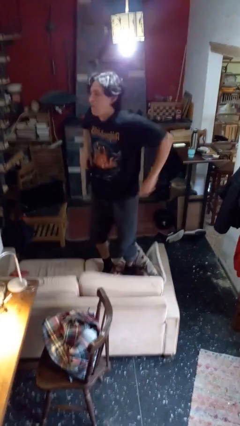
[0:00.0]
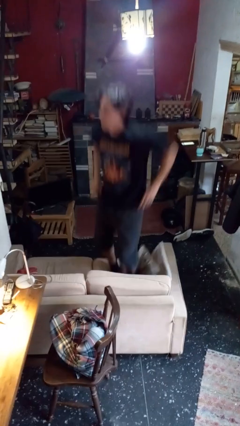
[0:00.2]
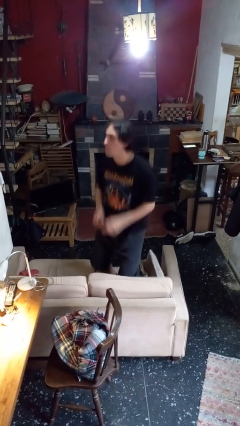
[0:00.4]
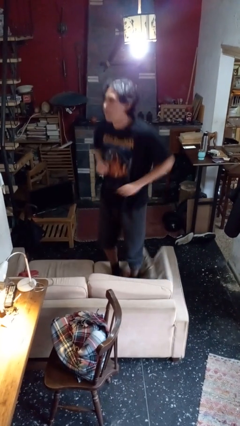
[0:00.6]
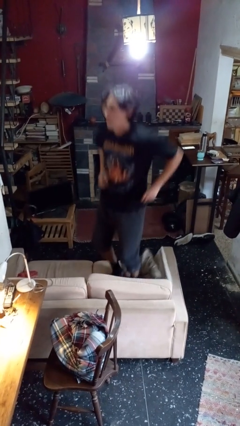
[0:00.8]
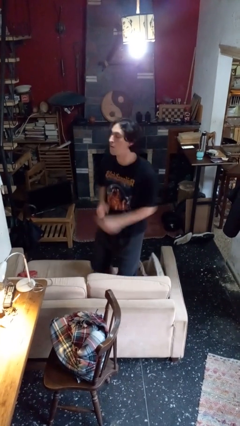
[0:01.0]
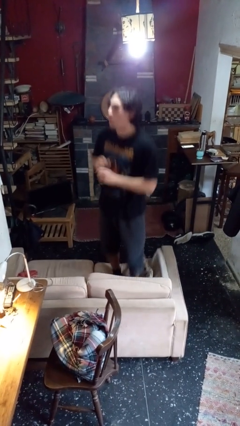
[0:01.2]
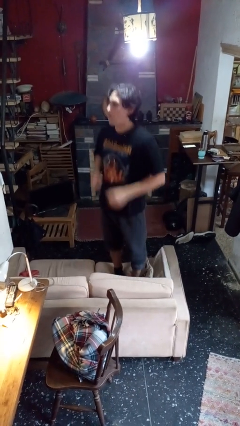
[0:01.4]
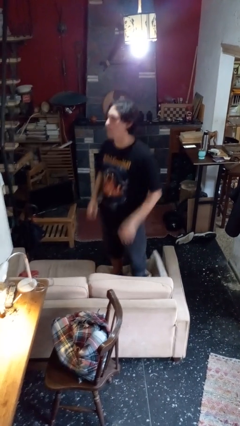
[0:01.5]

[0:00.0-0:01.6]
person jumps on couch

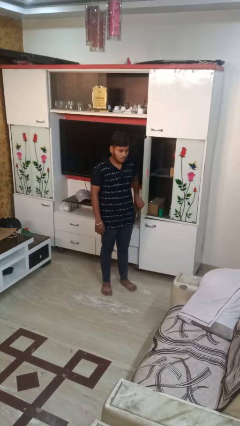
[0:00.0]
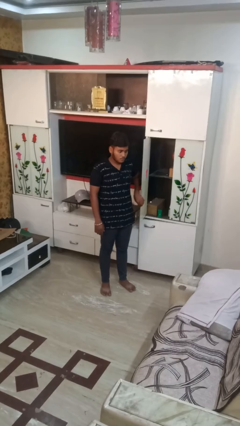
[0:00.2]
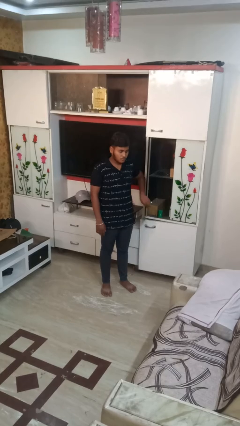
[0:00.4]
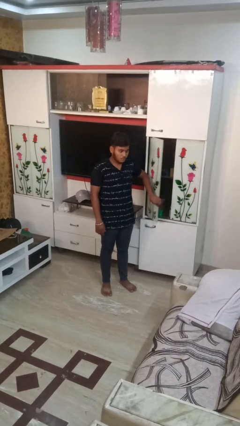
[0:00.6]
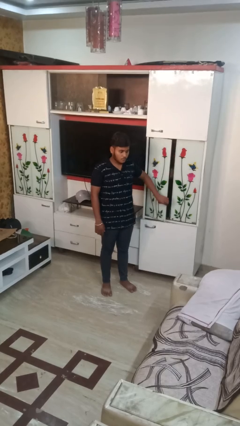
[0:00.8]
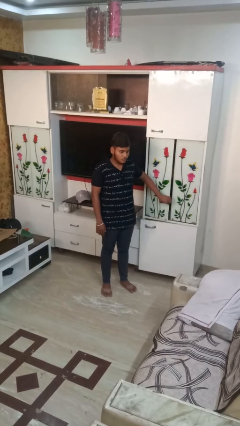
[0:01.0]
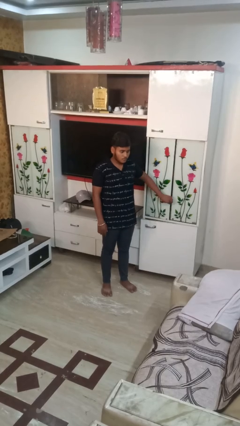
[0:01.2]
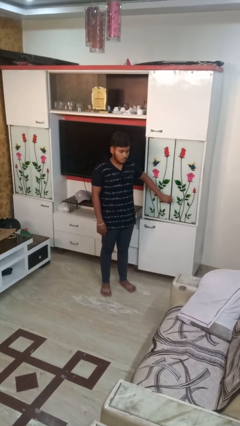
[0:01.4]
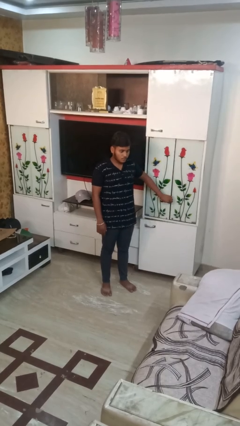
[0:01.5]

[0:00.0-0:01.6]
person closes closet door

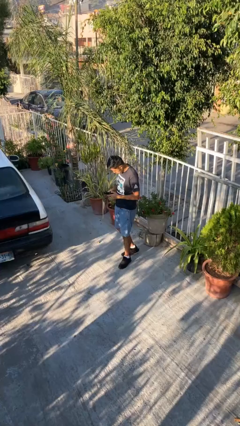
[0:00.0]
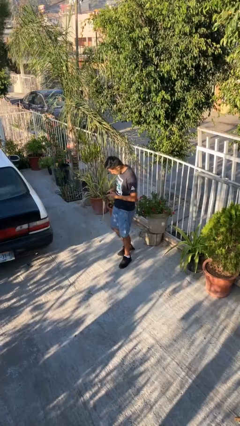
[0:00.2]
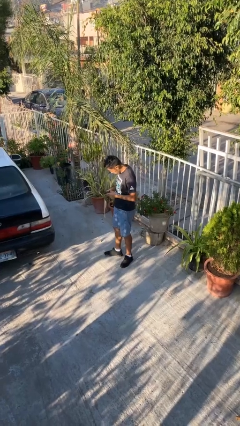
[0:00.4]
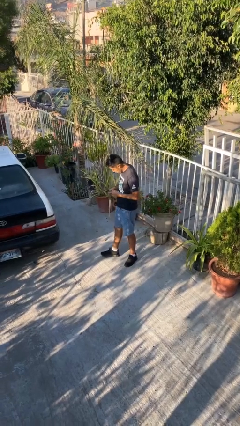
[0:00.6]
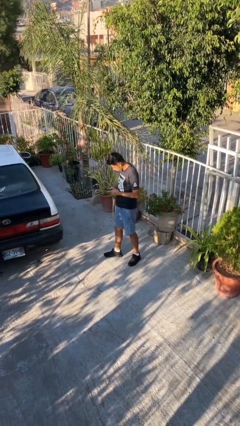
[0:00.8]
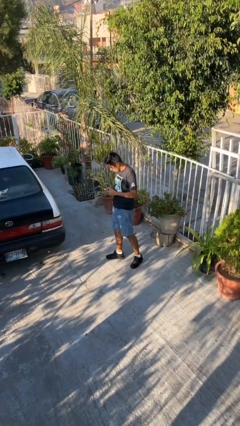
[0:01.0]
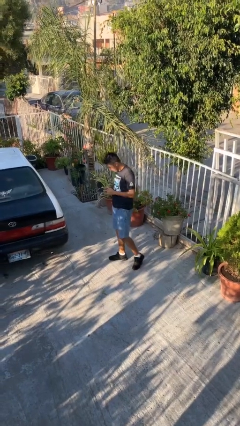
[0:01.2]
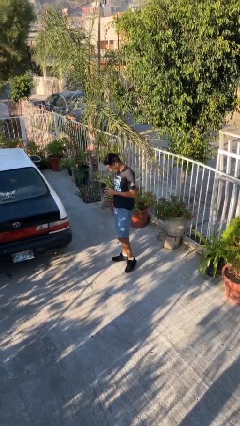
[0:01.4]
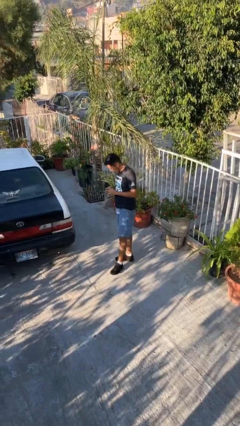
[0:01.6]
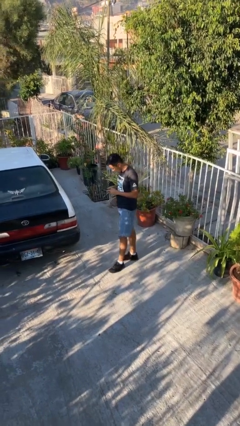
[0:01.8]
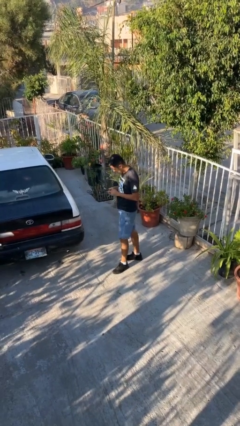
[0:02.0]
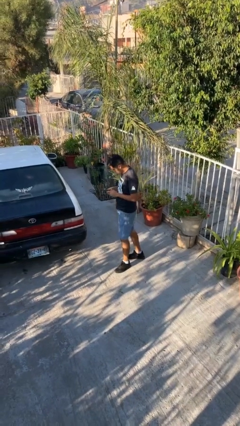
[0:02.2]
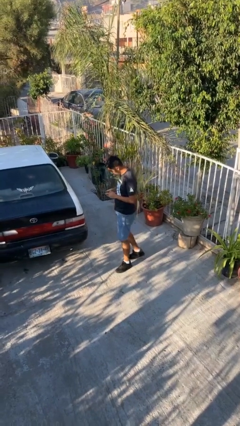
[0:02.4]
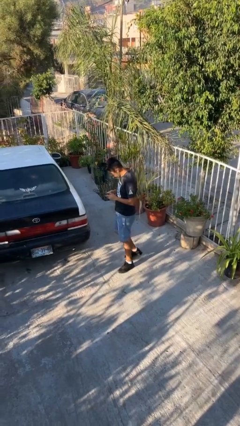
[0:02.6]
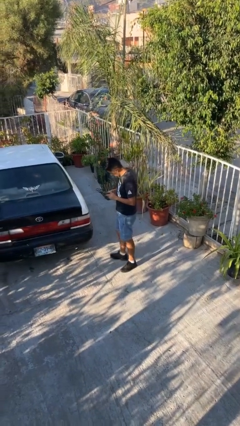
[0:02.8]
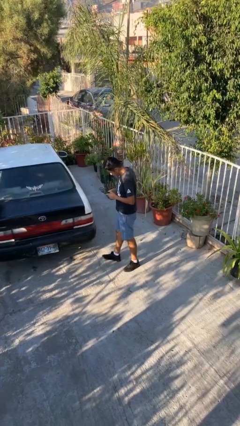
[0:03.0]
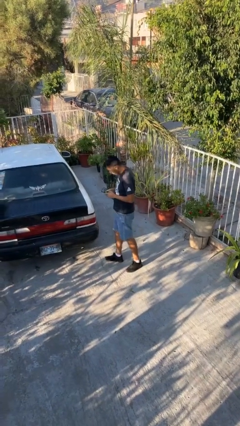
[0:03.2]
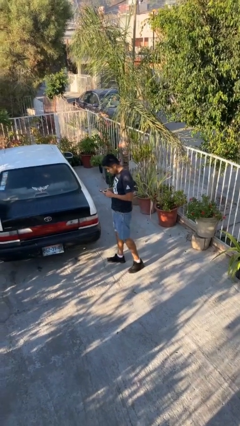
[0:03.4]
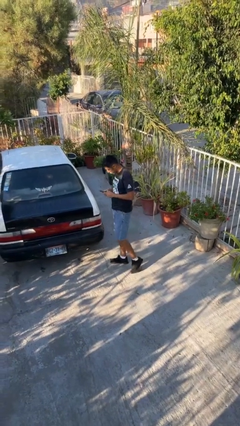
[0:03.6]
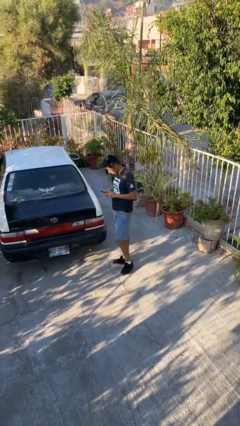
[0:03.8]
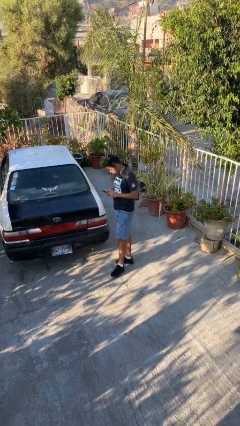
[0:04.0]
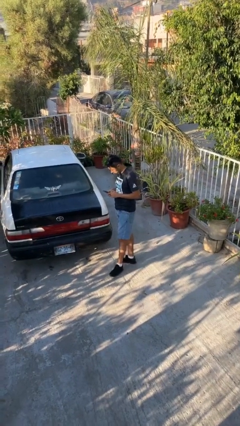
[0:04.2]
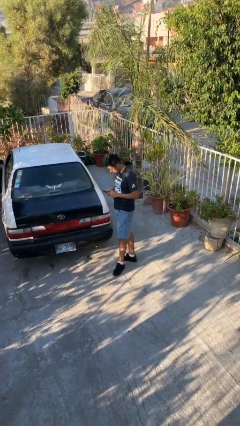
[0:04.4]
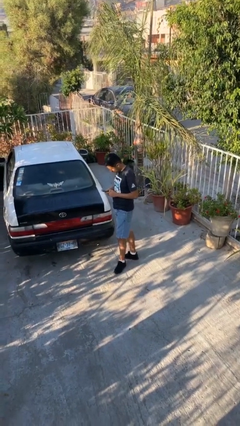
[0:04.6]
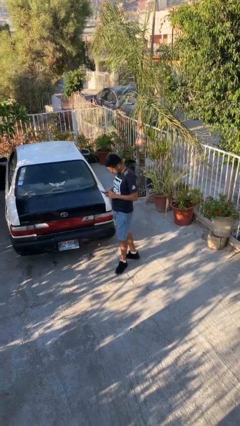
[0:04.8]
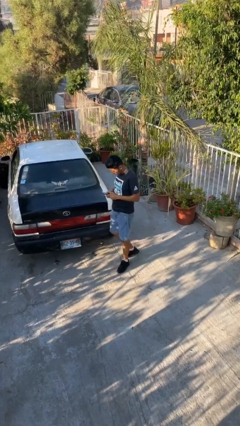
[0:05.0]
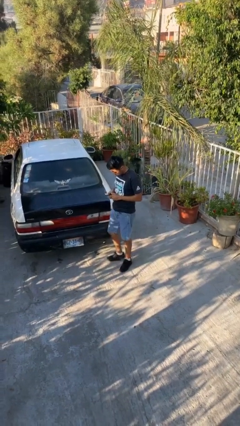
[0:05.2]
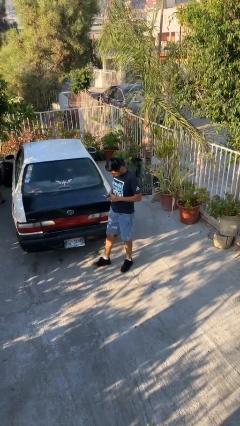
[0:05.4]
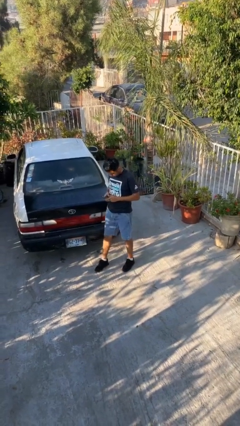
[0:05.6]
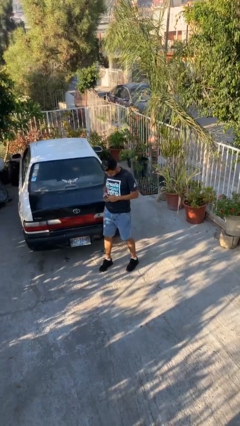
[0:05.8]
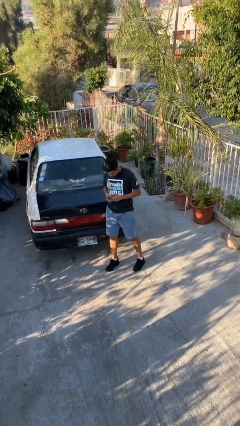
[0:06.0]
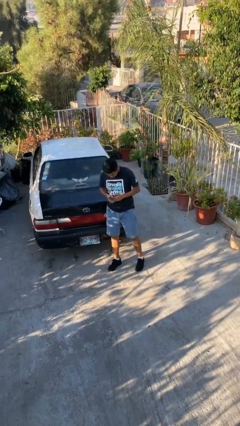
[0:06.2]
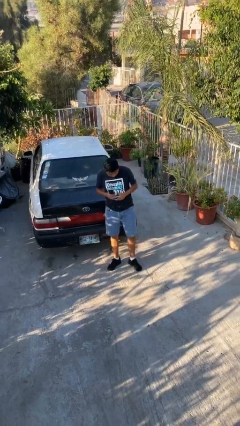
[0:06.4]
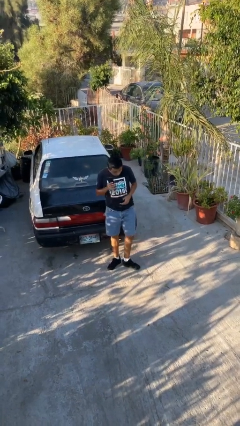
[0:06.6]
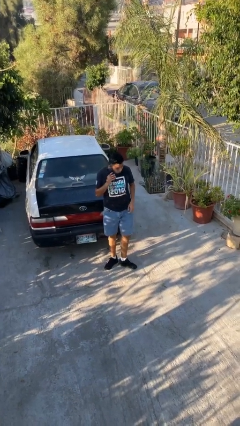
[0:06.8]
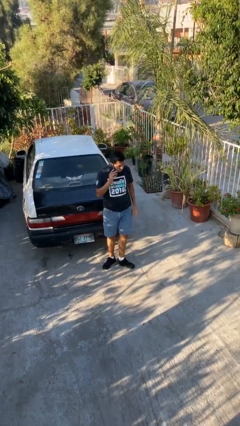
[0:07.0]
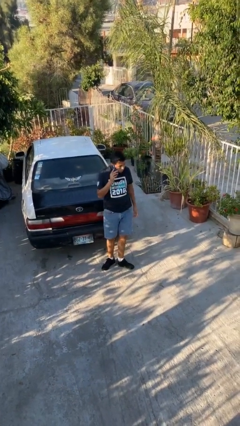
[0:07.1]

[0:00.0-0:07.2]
person texts on phone

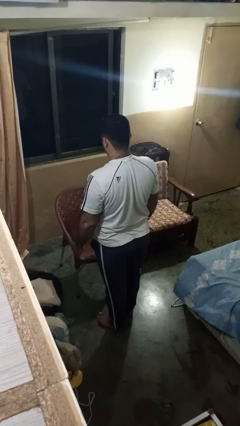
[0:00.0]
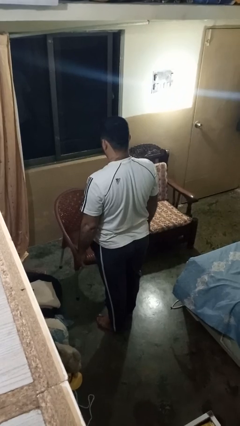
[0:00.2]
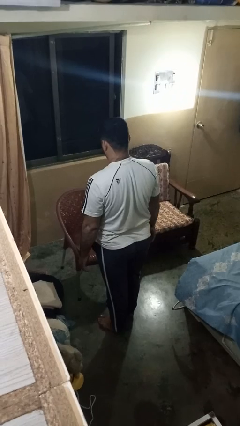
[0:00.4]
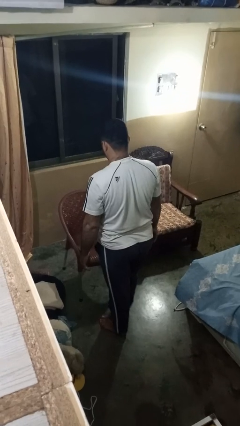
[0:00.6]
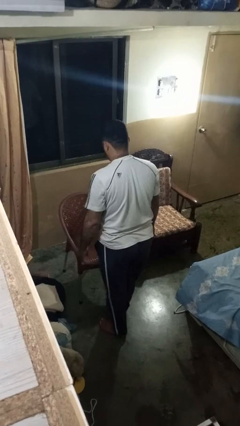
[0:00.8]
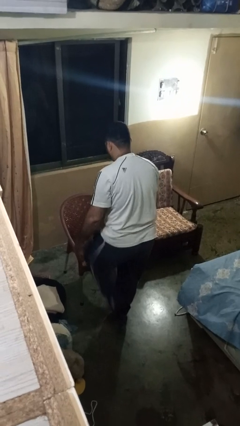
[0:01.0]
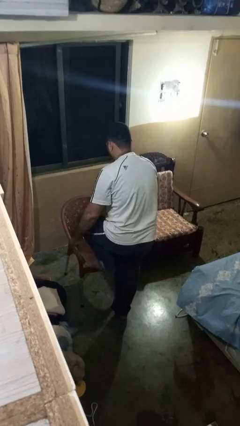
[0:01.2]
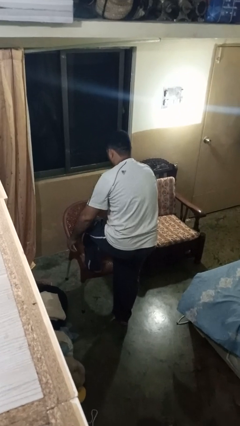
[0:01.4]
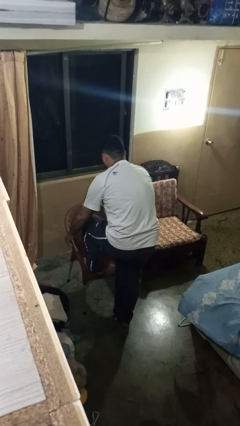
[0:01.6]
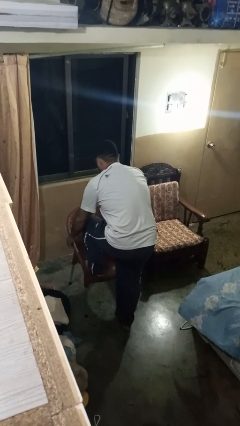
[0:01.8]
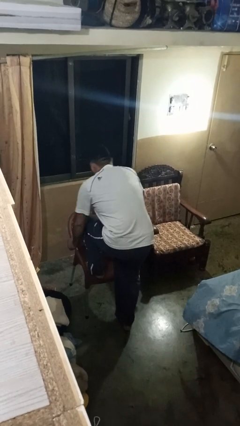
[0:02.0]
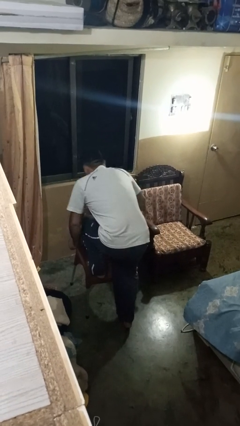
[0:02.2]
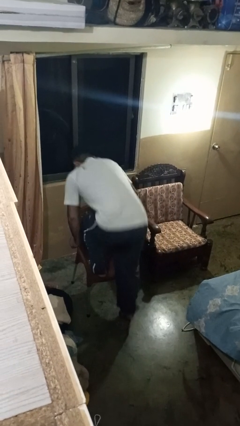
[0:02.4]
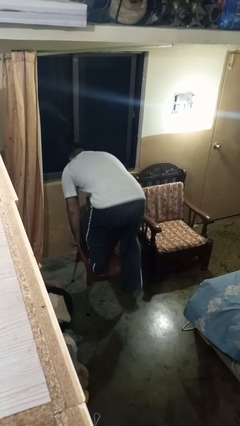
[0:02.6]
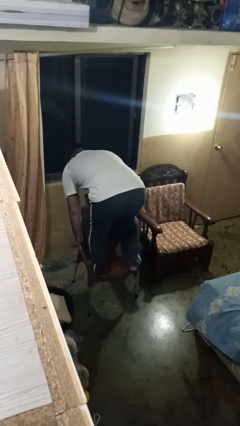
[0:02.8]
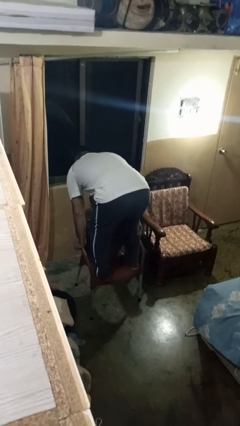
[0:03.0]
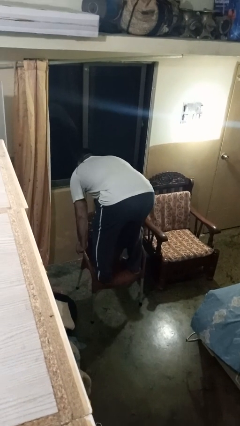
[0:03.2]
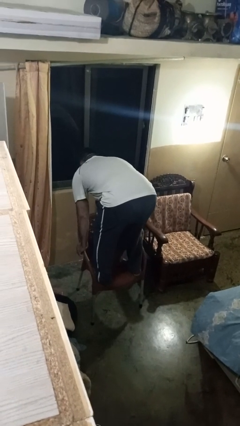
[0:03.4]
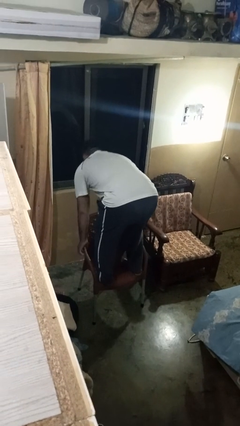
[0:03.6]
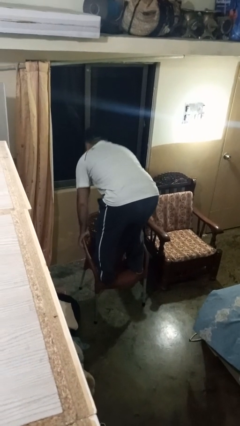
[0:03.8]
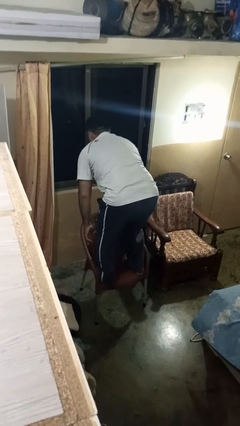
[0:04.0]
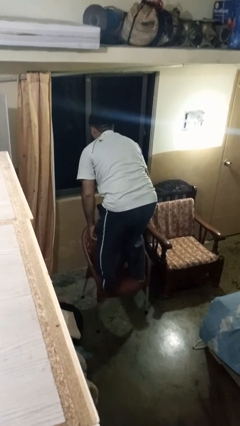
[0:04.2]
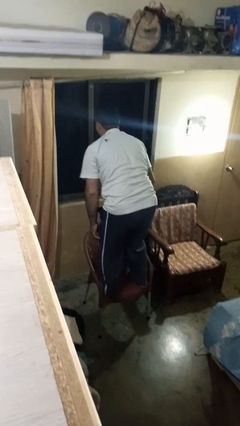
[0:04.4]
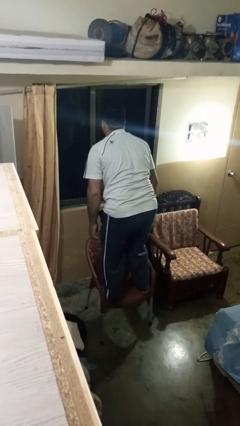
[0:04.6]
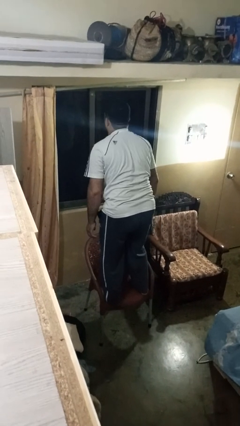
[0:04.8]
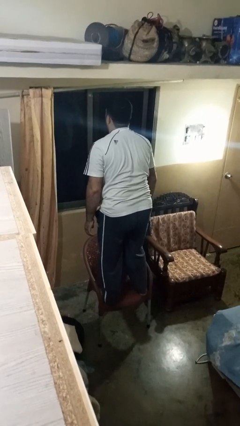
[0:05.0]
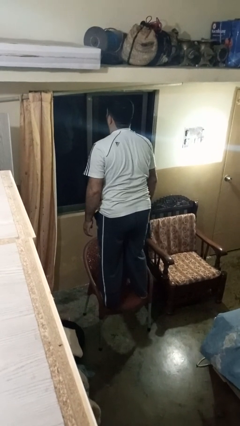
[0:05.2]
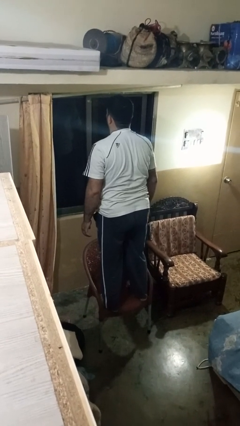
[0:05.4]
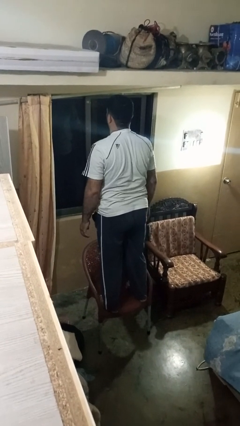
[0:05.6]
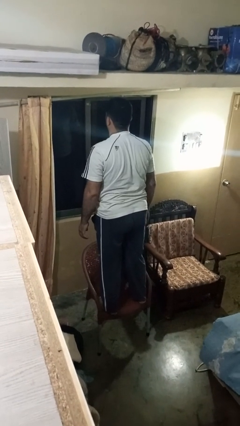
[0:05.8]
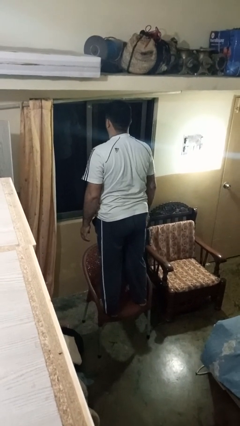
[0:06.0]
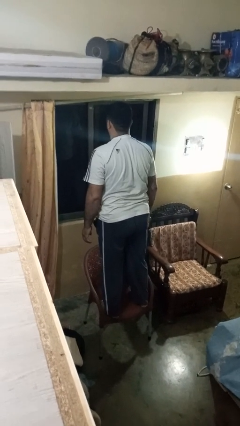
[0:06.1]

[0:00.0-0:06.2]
person climbs on chair

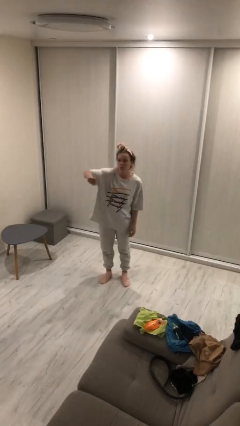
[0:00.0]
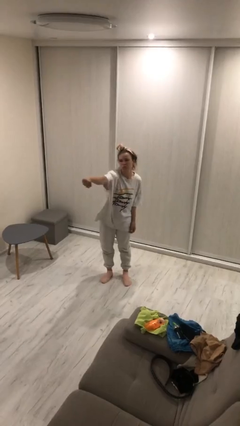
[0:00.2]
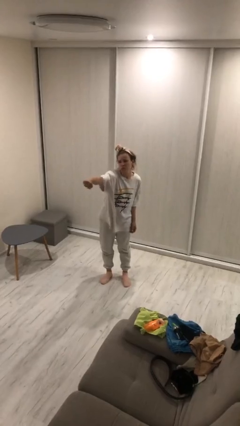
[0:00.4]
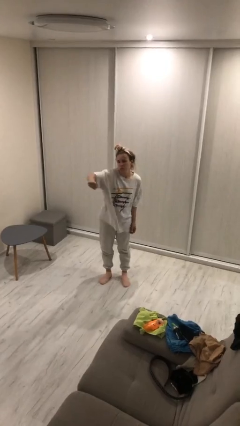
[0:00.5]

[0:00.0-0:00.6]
person karate chop

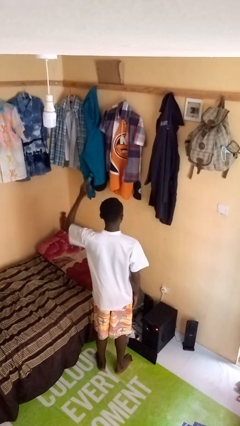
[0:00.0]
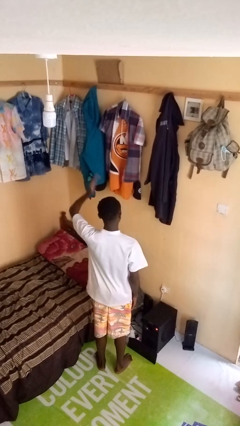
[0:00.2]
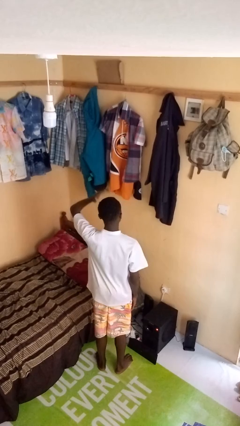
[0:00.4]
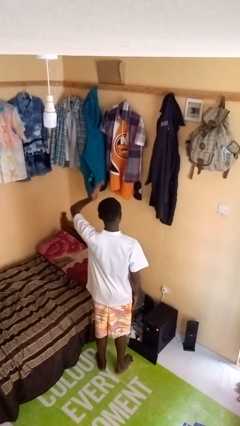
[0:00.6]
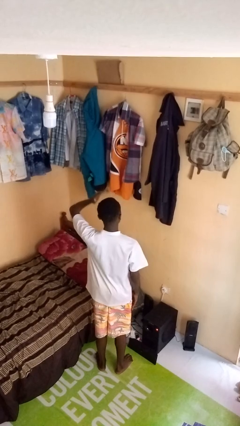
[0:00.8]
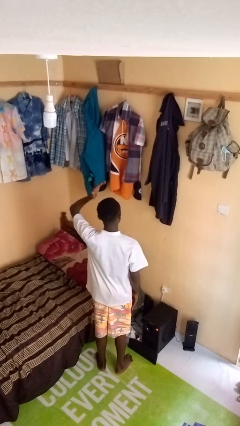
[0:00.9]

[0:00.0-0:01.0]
person pats head
